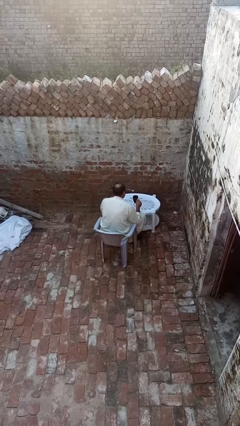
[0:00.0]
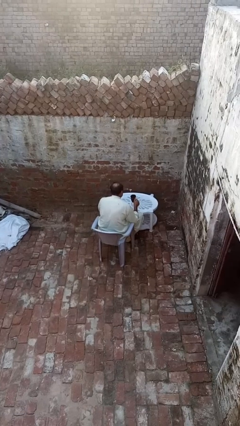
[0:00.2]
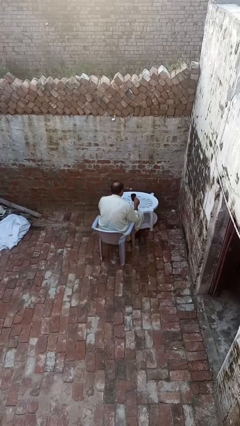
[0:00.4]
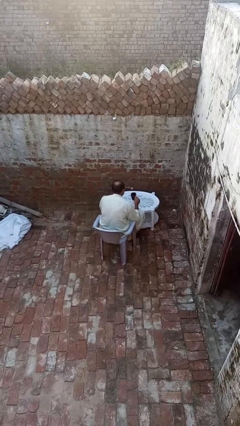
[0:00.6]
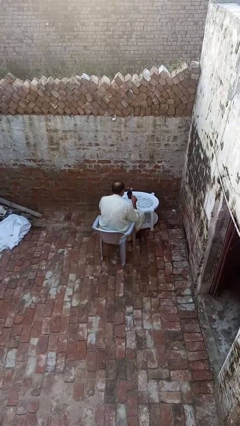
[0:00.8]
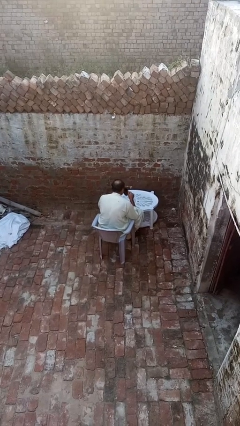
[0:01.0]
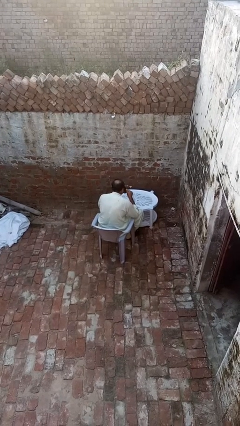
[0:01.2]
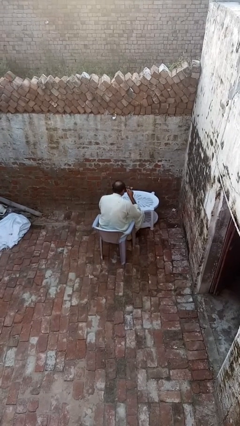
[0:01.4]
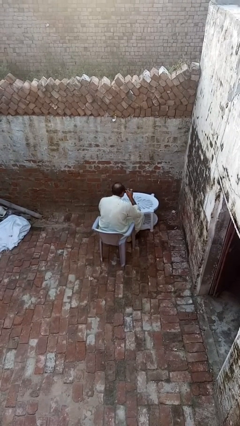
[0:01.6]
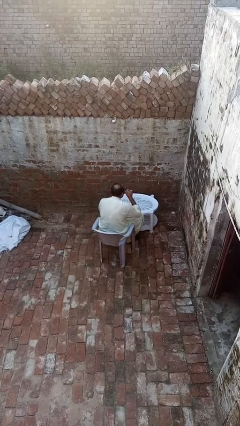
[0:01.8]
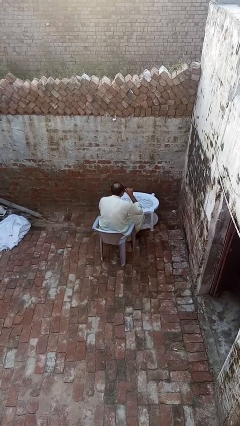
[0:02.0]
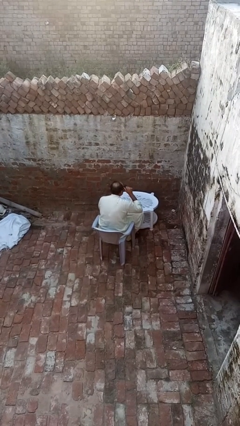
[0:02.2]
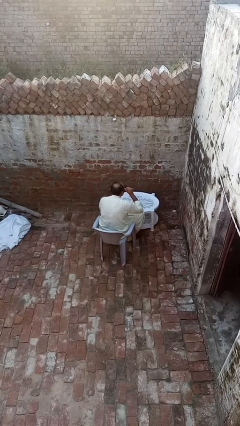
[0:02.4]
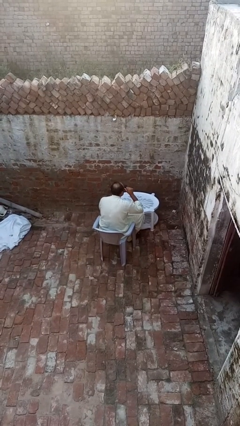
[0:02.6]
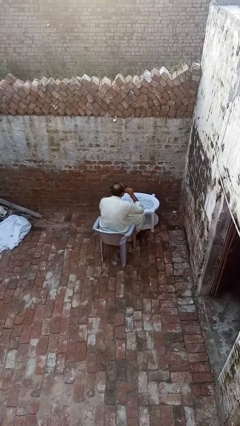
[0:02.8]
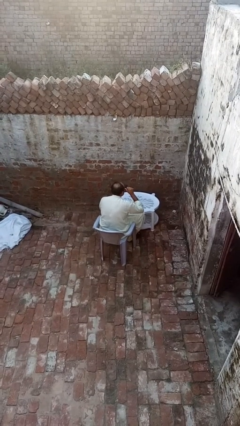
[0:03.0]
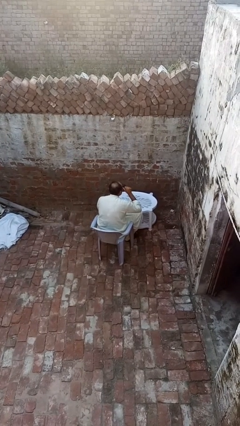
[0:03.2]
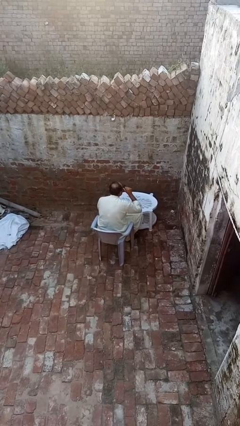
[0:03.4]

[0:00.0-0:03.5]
person drinks from mug

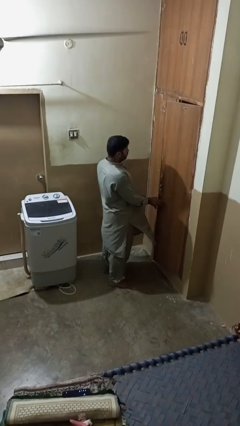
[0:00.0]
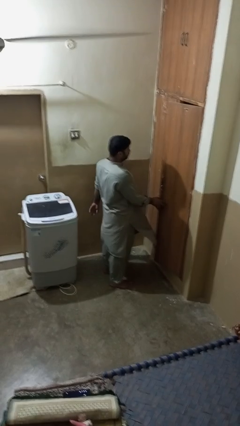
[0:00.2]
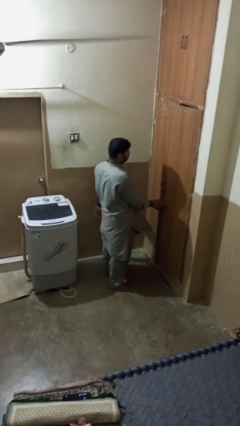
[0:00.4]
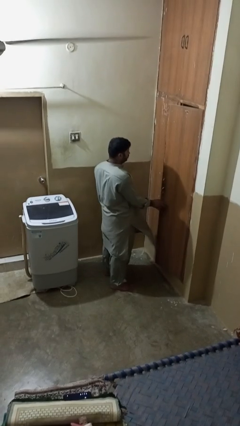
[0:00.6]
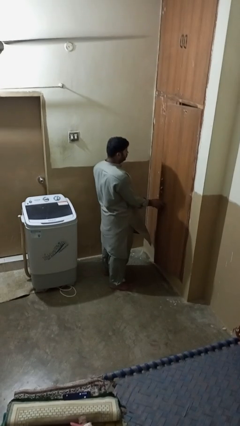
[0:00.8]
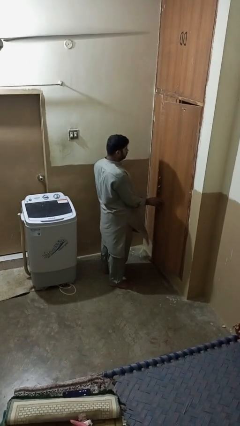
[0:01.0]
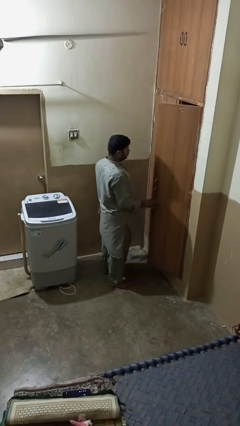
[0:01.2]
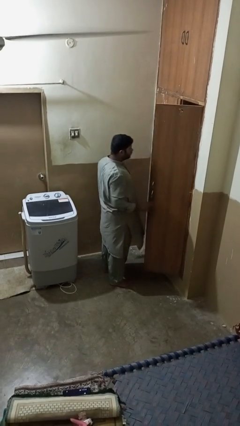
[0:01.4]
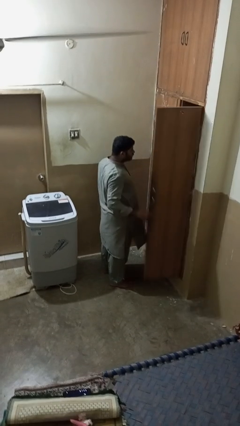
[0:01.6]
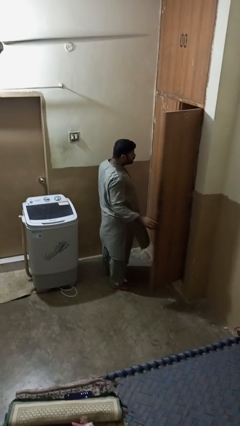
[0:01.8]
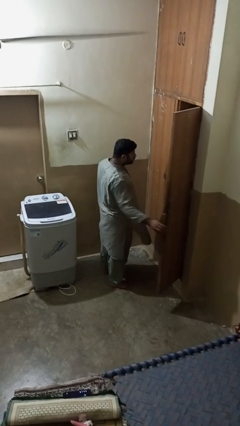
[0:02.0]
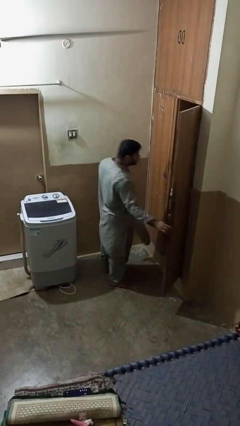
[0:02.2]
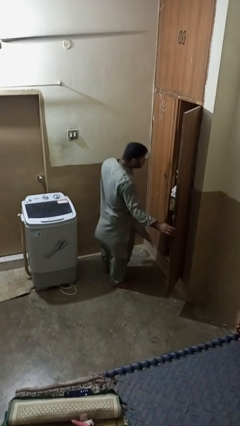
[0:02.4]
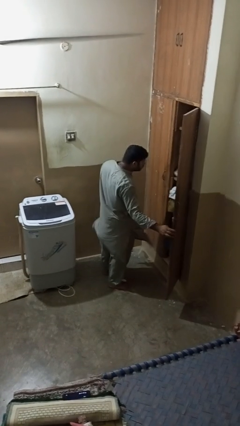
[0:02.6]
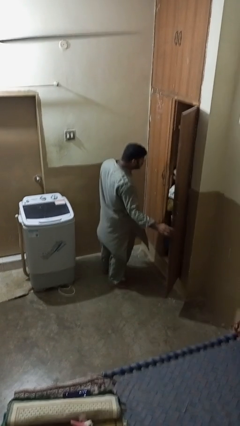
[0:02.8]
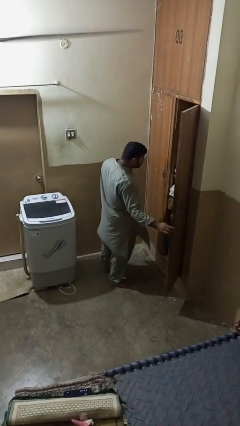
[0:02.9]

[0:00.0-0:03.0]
person opens closet door

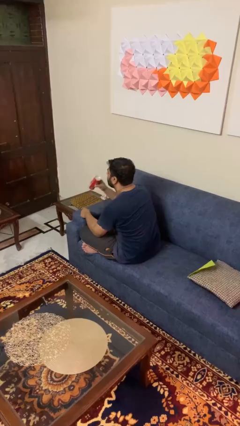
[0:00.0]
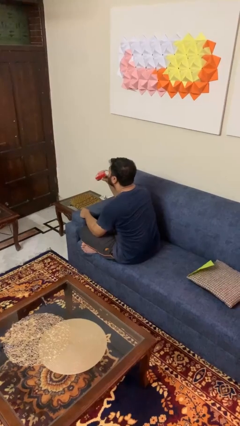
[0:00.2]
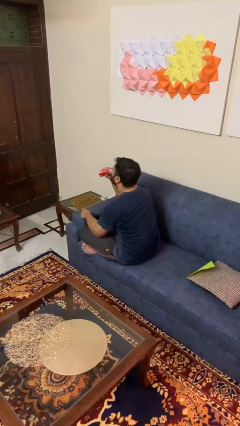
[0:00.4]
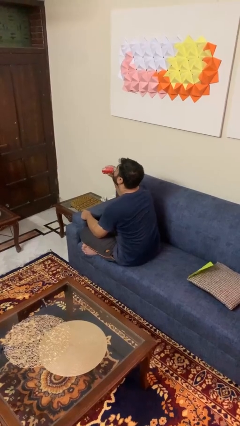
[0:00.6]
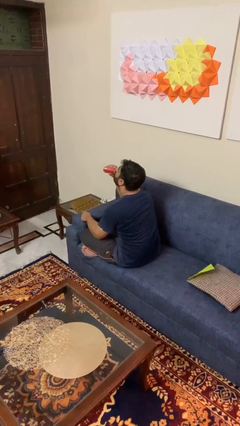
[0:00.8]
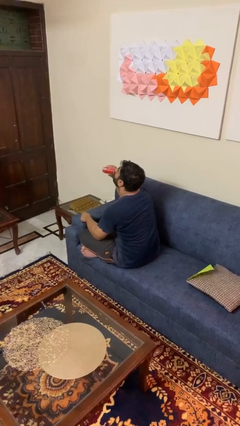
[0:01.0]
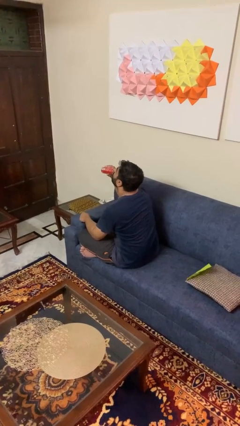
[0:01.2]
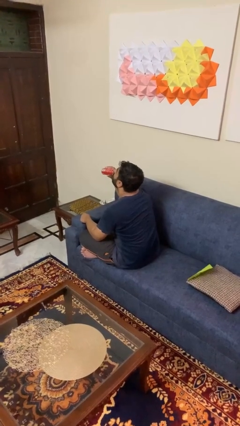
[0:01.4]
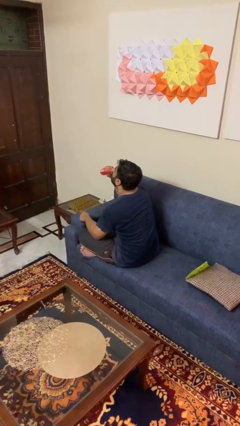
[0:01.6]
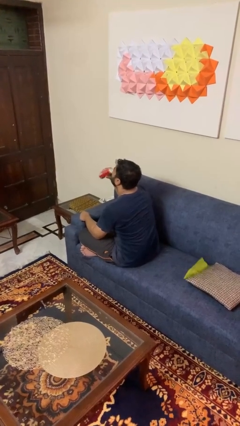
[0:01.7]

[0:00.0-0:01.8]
person drinks from beverage can

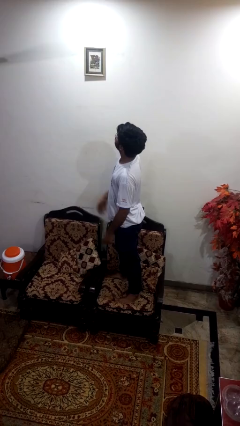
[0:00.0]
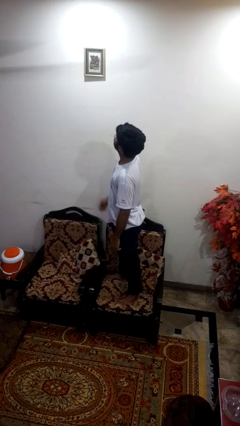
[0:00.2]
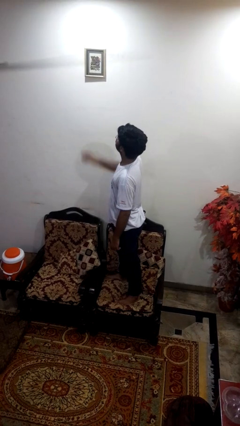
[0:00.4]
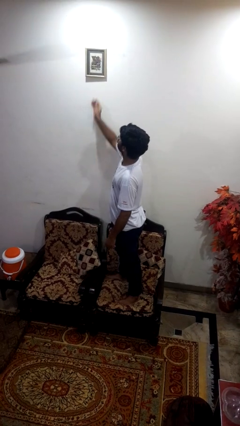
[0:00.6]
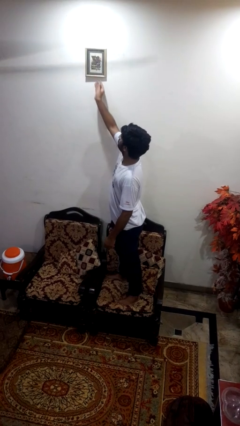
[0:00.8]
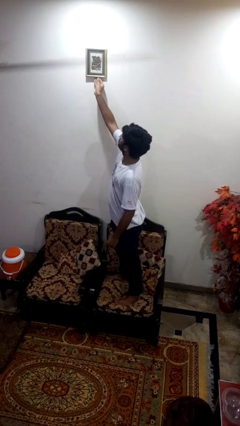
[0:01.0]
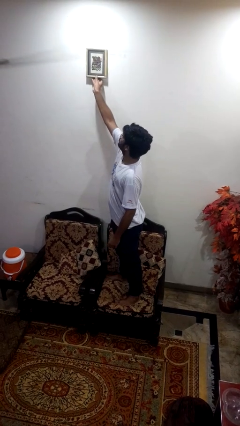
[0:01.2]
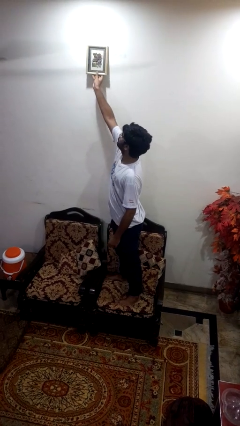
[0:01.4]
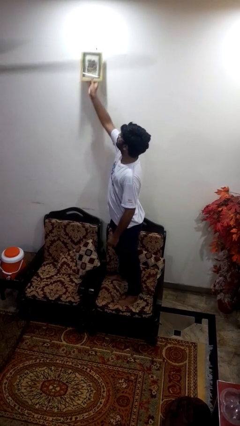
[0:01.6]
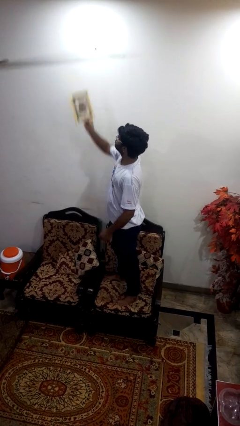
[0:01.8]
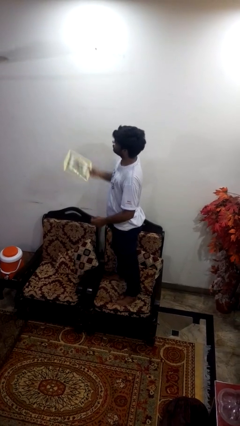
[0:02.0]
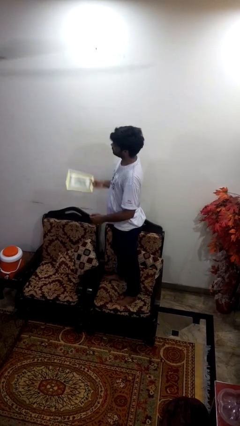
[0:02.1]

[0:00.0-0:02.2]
person takes down picture frame

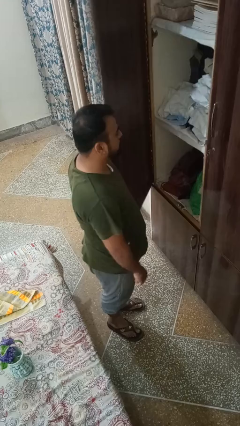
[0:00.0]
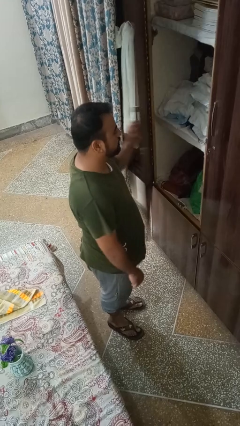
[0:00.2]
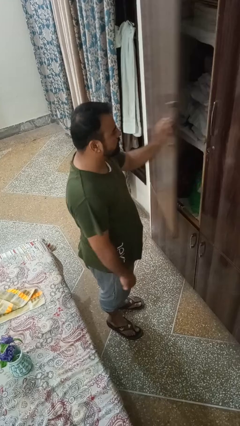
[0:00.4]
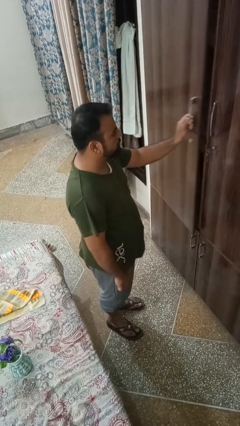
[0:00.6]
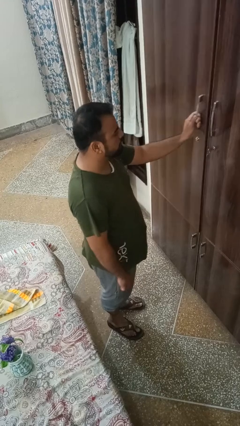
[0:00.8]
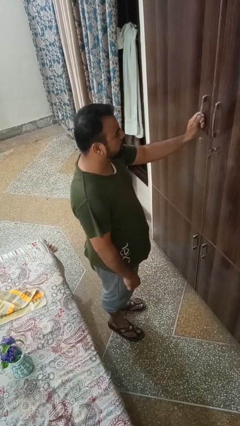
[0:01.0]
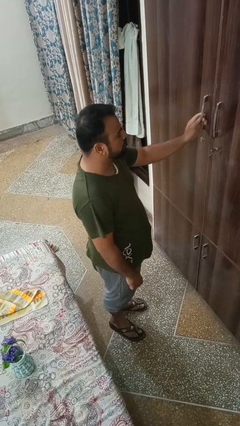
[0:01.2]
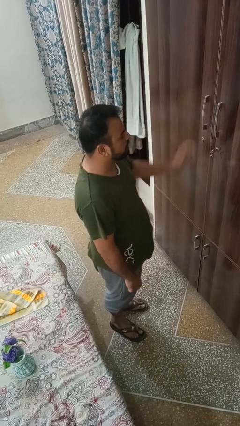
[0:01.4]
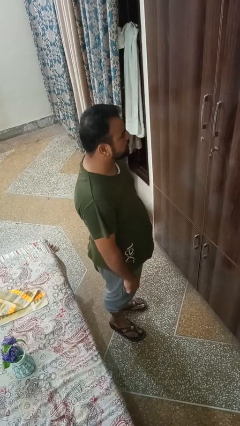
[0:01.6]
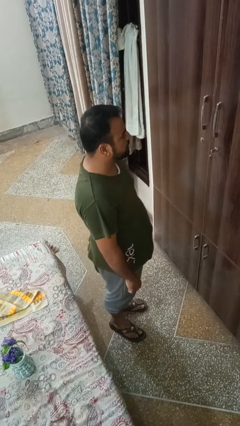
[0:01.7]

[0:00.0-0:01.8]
person closes closet door

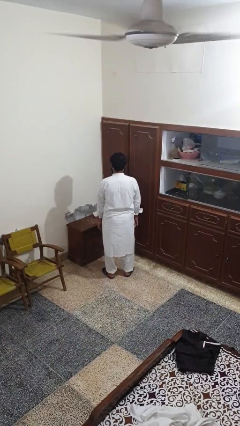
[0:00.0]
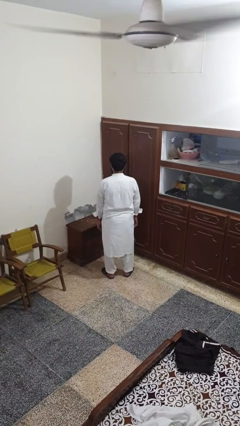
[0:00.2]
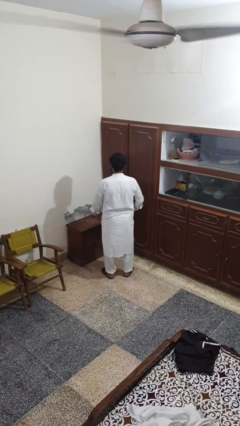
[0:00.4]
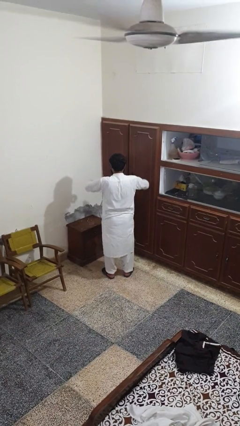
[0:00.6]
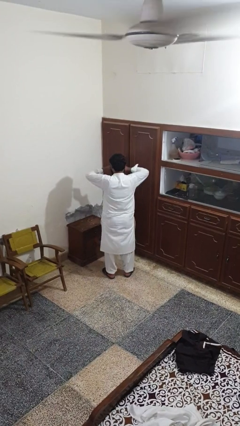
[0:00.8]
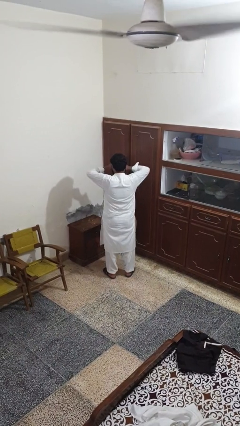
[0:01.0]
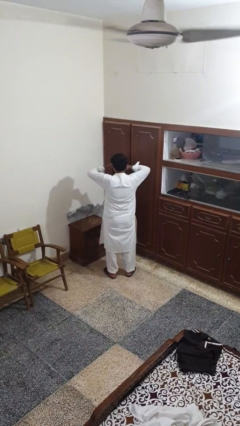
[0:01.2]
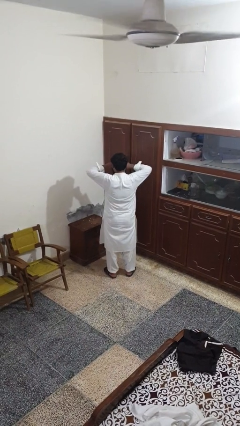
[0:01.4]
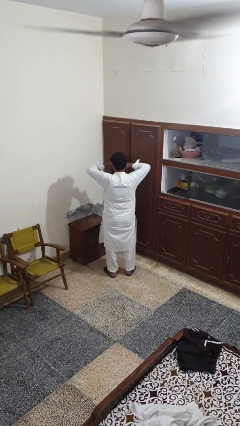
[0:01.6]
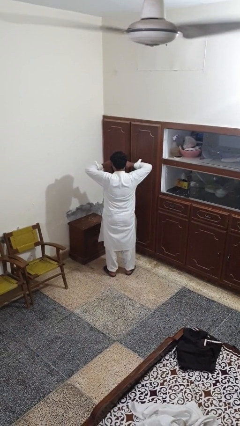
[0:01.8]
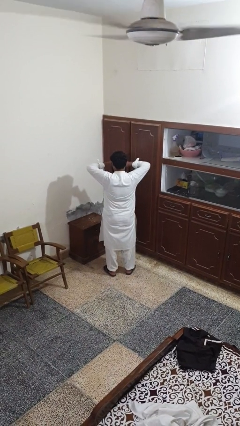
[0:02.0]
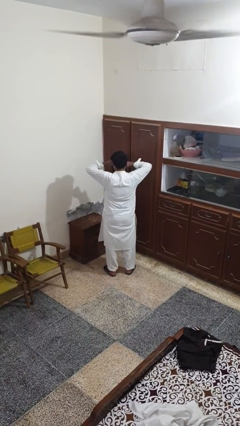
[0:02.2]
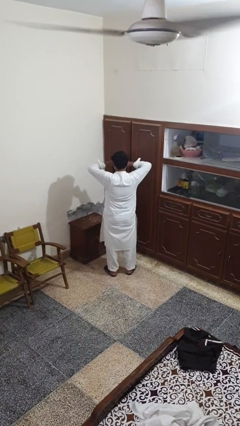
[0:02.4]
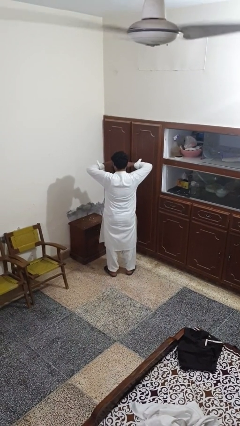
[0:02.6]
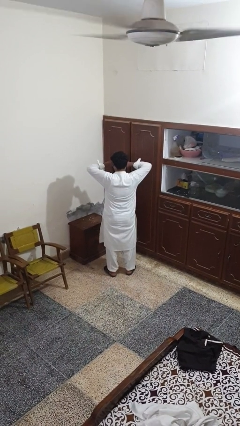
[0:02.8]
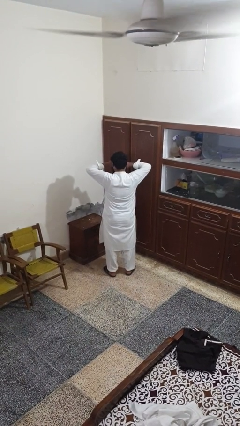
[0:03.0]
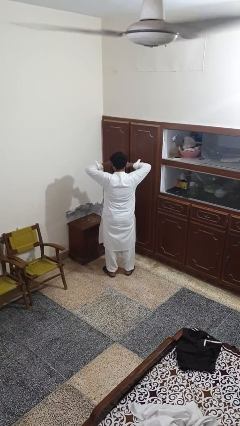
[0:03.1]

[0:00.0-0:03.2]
person rubs eyes

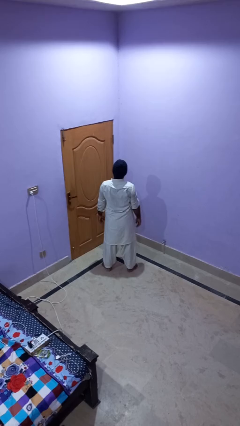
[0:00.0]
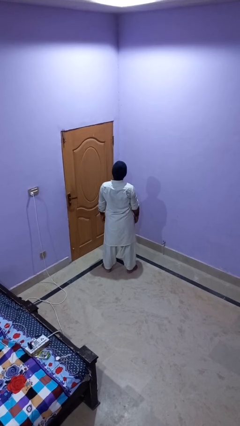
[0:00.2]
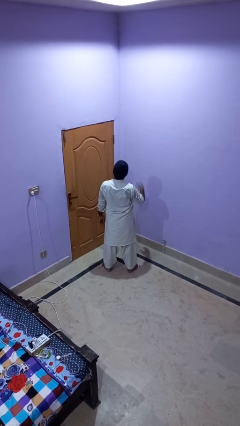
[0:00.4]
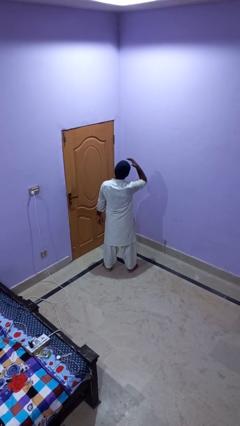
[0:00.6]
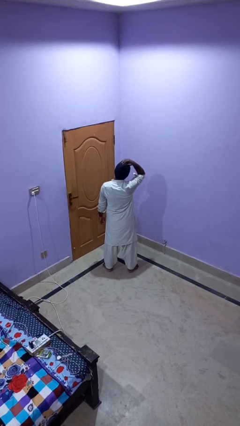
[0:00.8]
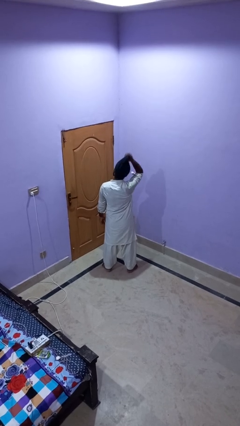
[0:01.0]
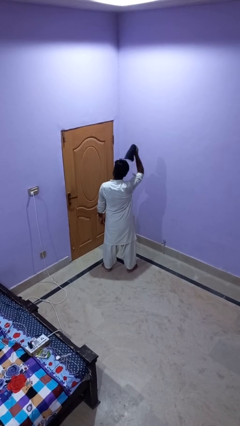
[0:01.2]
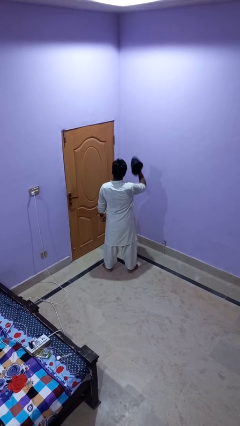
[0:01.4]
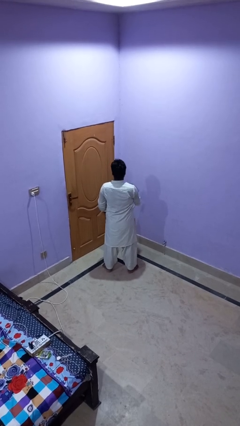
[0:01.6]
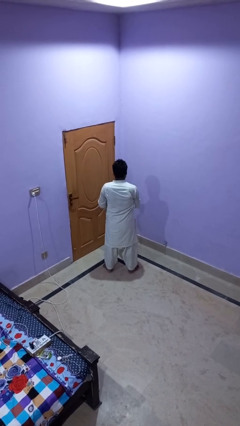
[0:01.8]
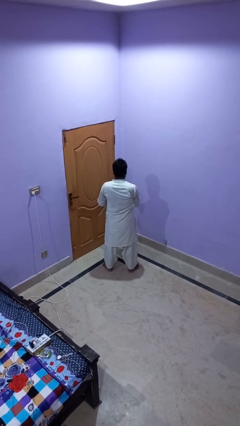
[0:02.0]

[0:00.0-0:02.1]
person takes off hat
